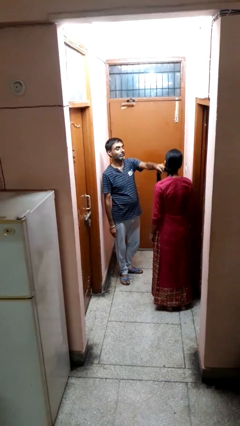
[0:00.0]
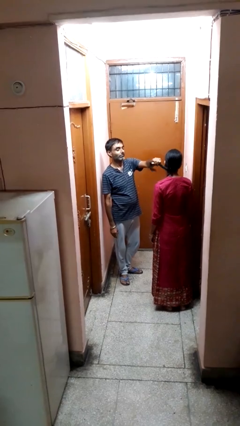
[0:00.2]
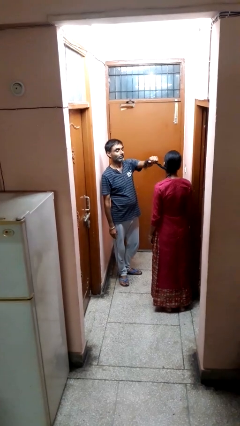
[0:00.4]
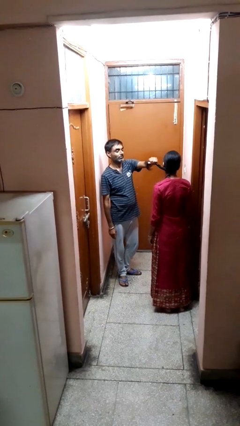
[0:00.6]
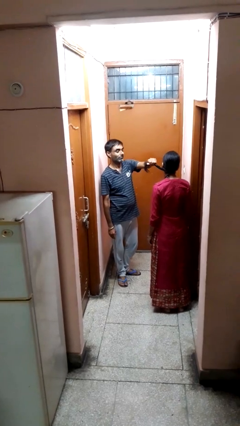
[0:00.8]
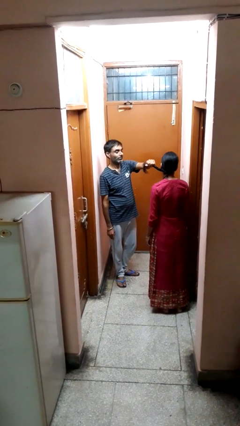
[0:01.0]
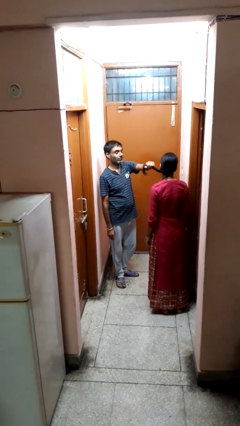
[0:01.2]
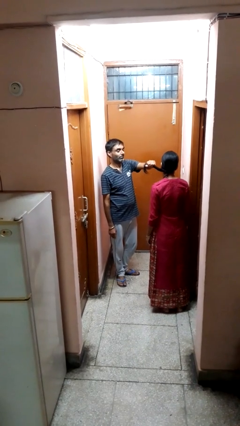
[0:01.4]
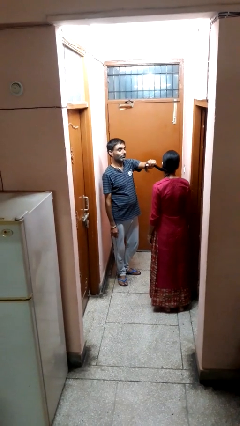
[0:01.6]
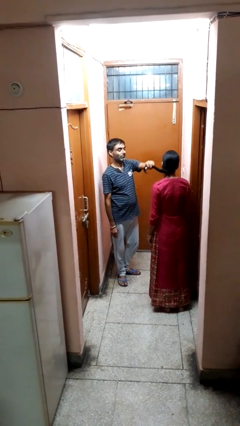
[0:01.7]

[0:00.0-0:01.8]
person grabs person by hair

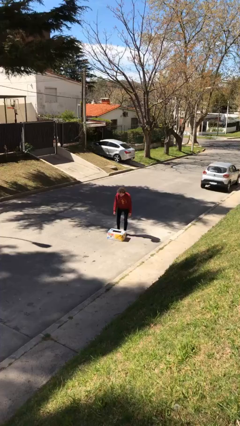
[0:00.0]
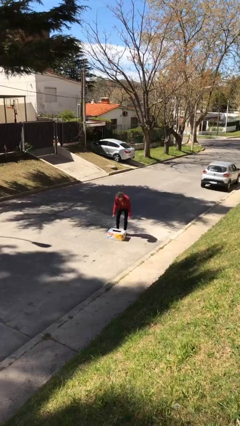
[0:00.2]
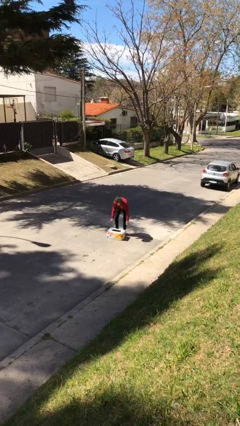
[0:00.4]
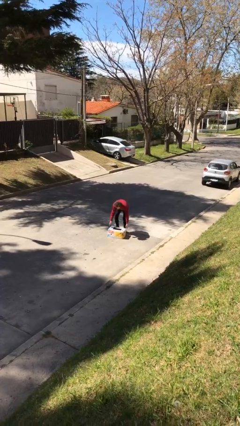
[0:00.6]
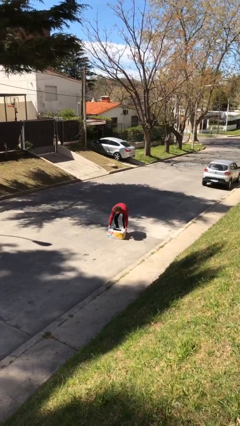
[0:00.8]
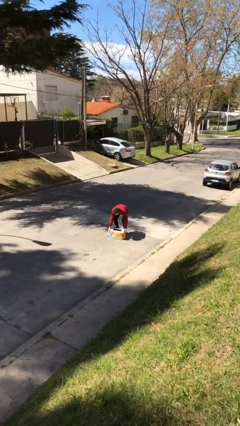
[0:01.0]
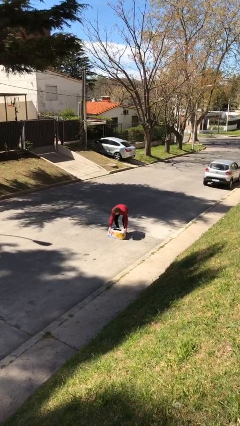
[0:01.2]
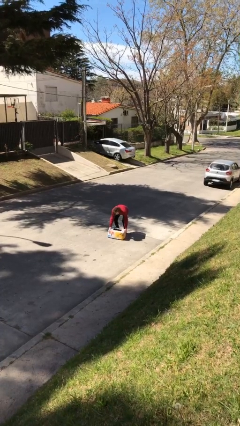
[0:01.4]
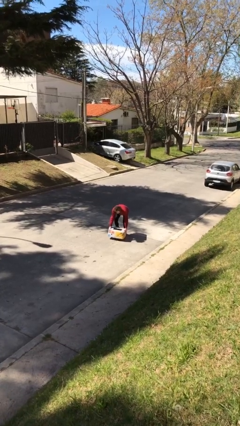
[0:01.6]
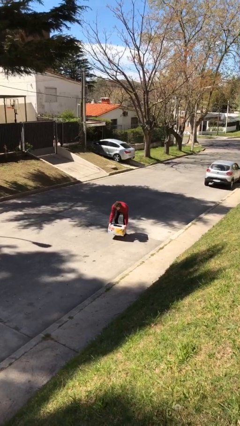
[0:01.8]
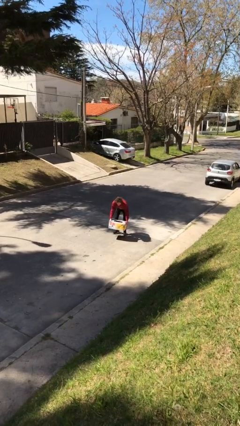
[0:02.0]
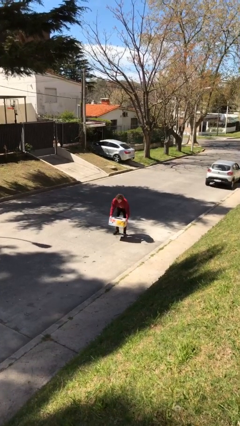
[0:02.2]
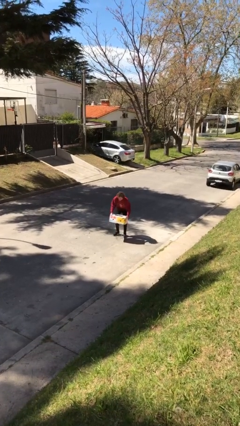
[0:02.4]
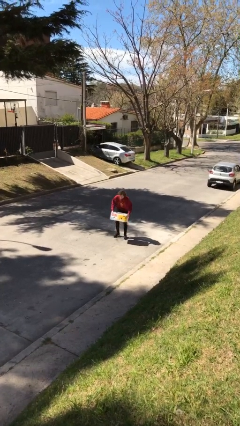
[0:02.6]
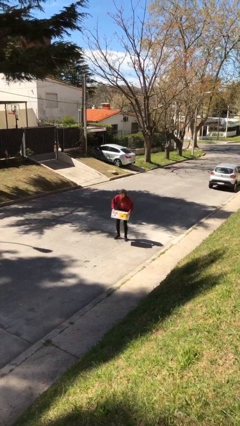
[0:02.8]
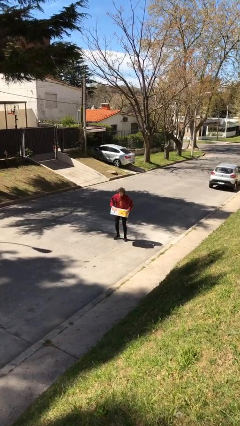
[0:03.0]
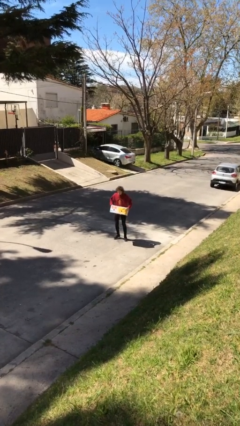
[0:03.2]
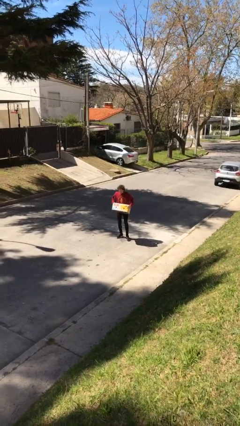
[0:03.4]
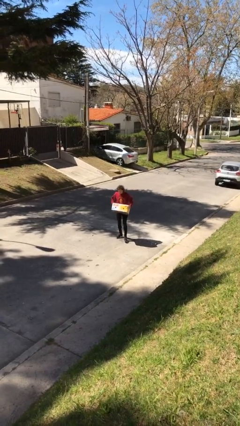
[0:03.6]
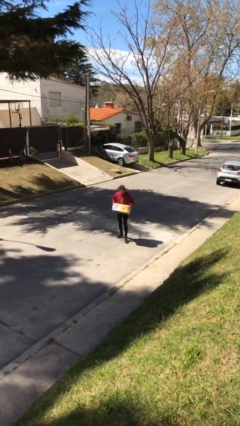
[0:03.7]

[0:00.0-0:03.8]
person picks up object from floor

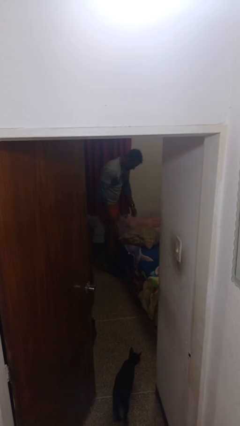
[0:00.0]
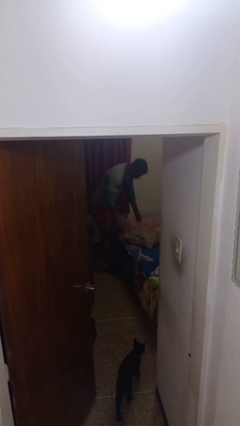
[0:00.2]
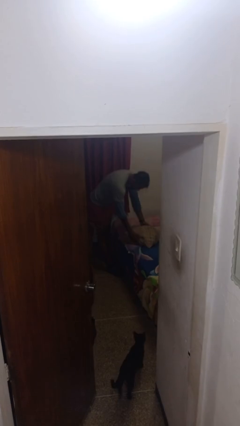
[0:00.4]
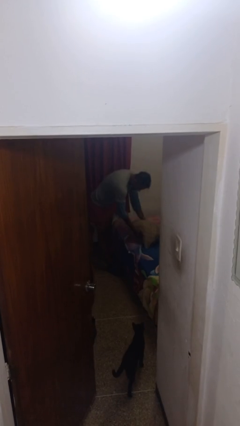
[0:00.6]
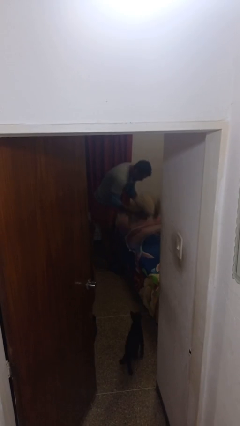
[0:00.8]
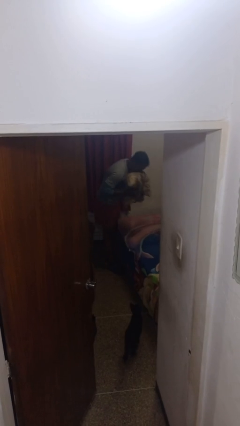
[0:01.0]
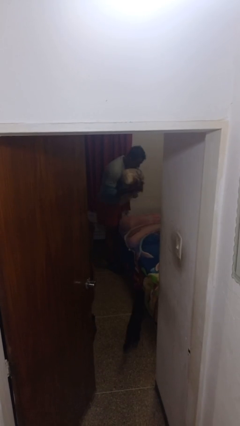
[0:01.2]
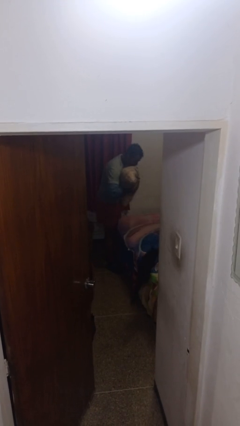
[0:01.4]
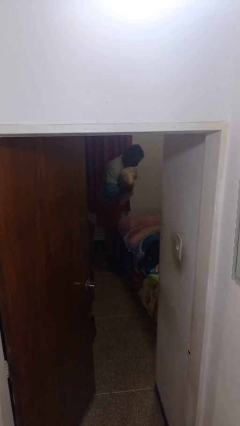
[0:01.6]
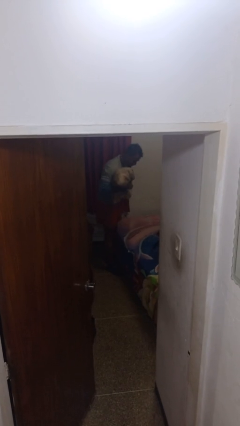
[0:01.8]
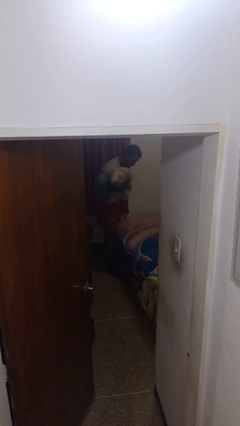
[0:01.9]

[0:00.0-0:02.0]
person picks up object from bed

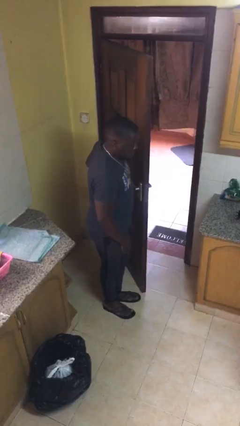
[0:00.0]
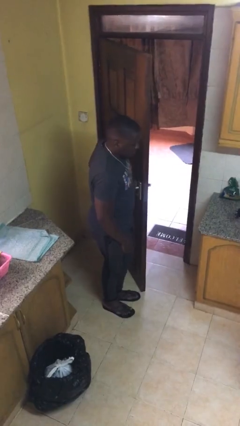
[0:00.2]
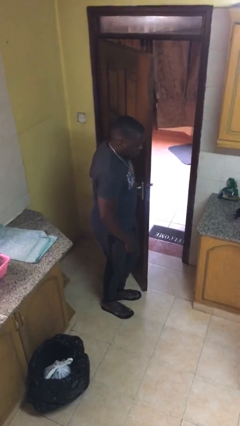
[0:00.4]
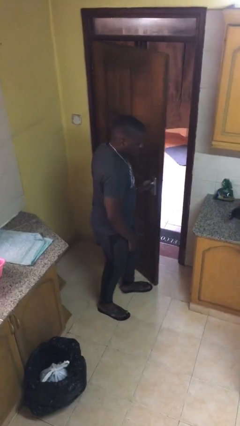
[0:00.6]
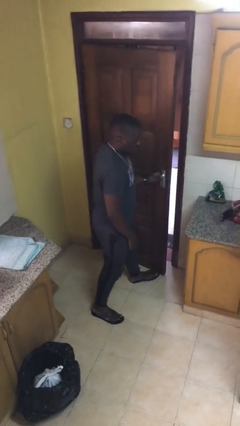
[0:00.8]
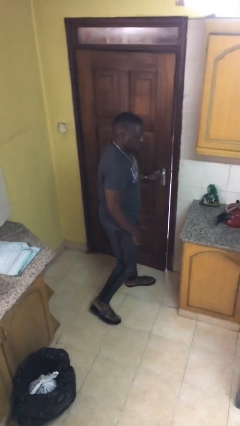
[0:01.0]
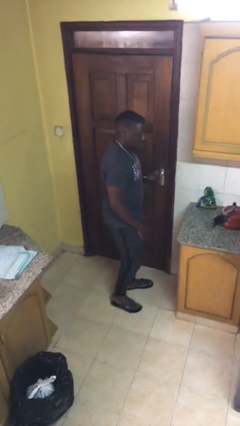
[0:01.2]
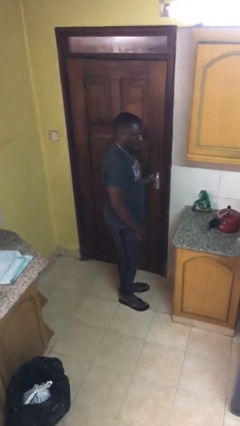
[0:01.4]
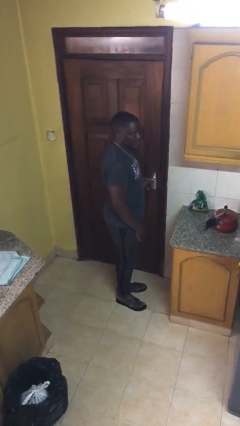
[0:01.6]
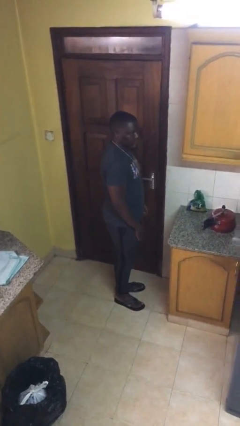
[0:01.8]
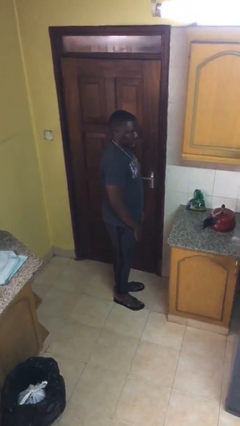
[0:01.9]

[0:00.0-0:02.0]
person closes facility door

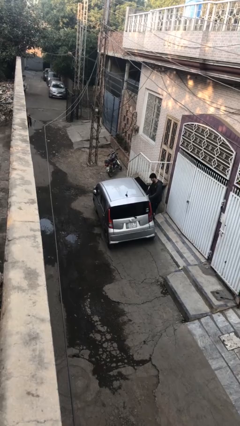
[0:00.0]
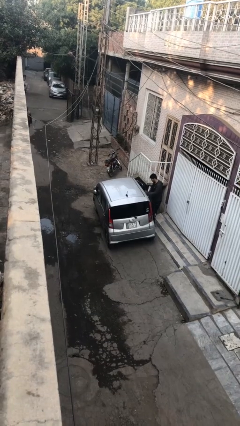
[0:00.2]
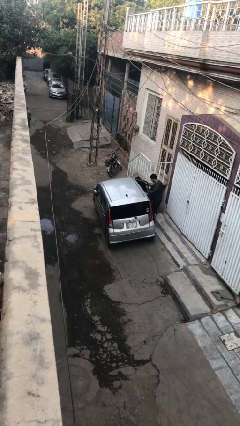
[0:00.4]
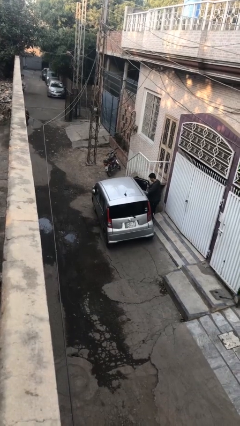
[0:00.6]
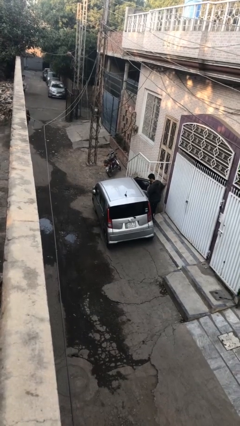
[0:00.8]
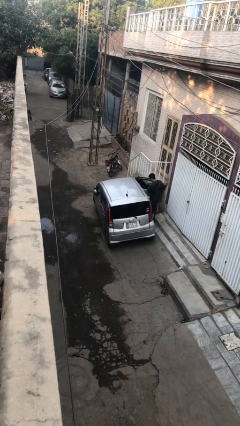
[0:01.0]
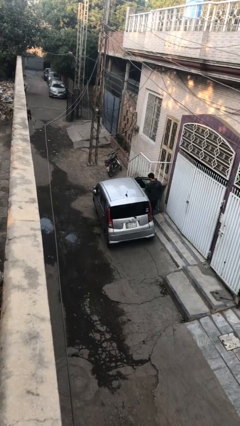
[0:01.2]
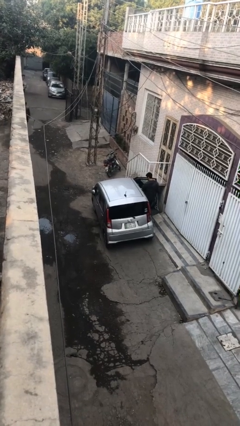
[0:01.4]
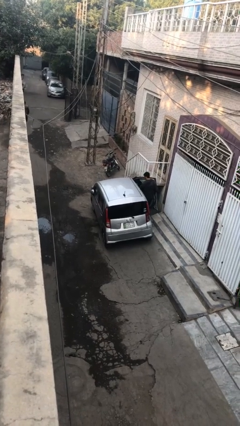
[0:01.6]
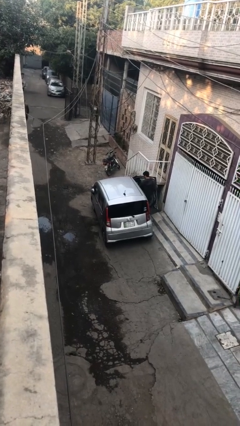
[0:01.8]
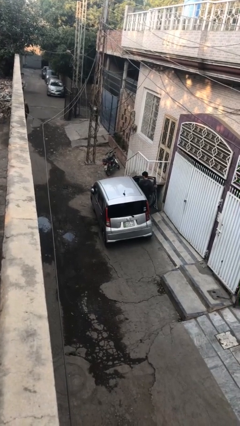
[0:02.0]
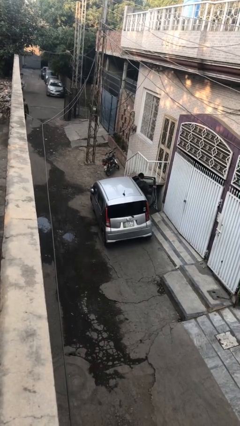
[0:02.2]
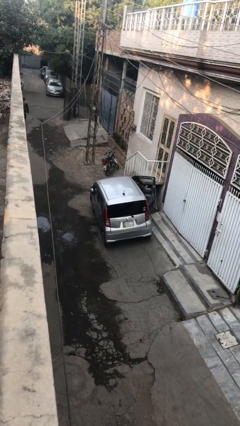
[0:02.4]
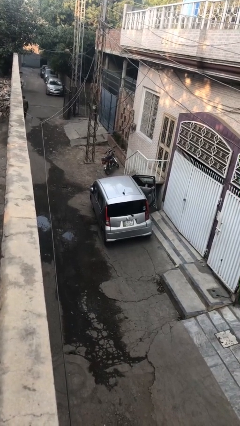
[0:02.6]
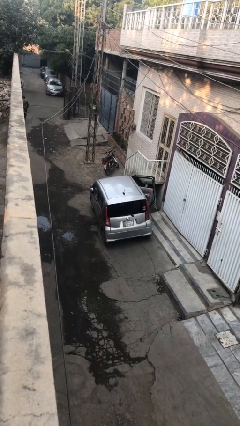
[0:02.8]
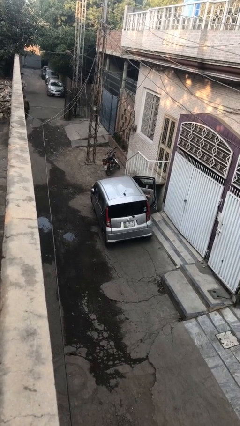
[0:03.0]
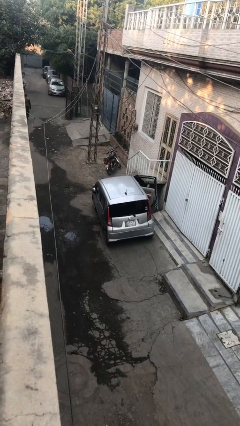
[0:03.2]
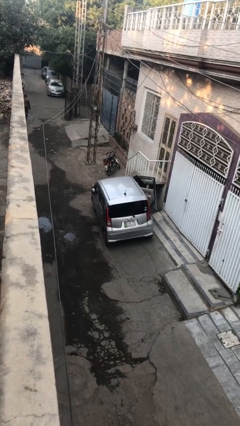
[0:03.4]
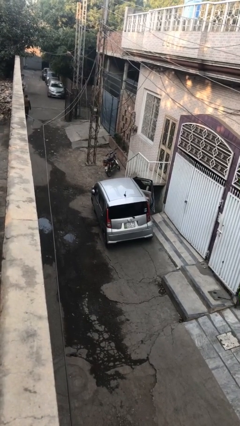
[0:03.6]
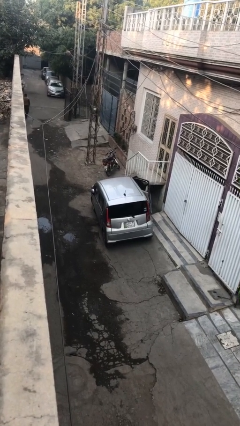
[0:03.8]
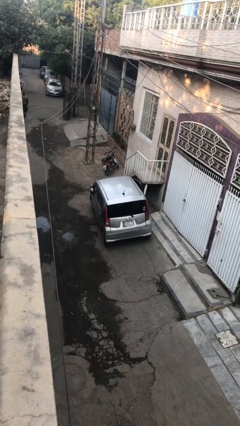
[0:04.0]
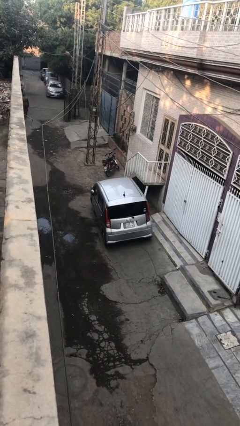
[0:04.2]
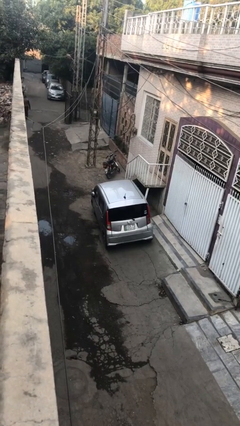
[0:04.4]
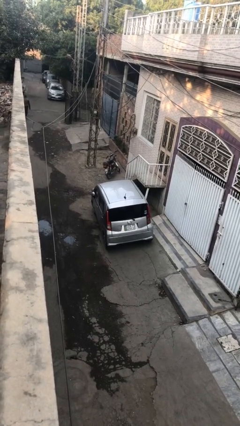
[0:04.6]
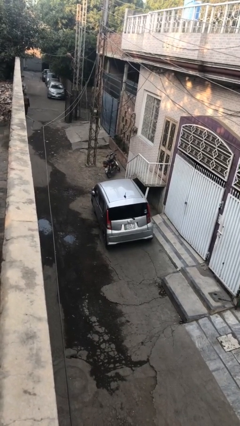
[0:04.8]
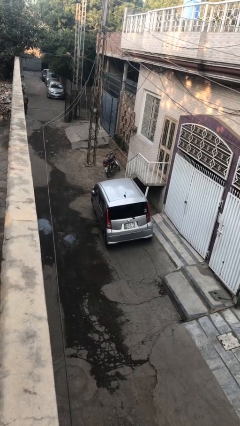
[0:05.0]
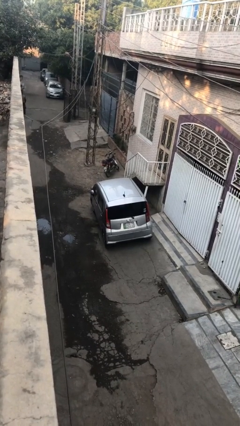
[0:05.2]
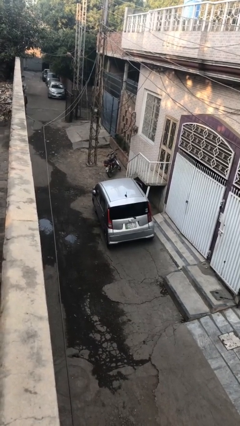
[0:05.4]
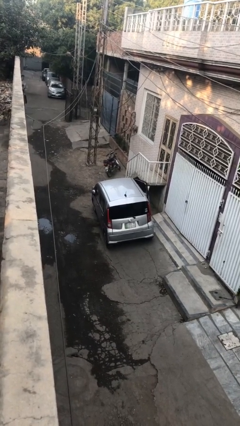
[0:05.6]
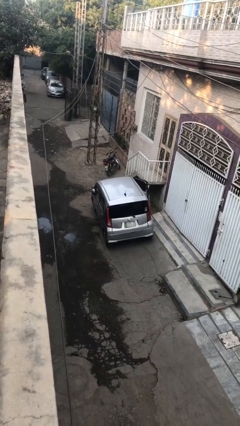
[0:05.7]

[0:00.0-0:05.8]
car picks up person

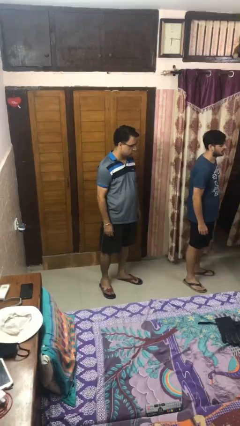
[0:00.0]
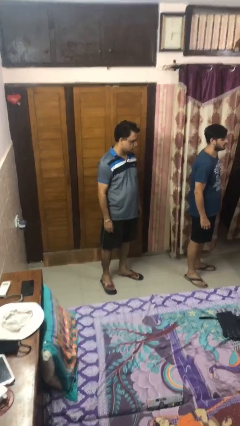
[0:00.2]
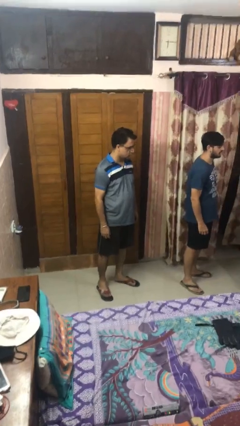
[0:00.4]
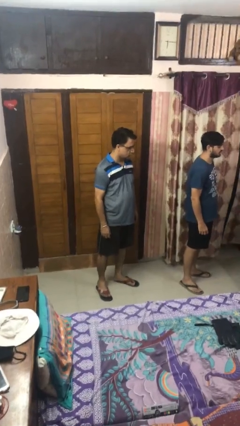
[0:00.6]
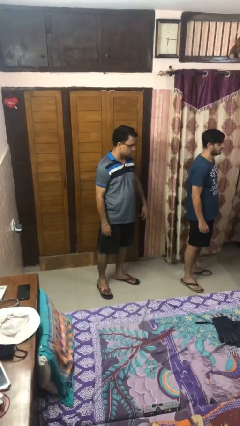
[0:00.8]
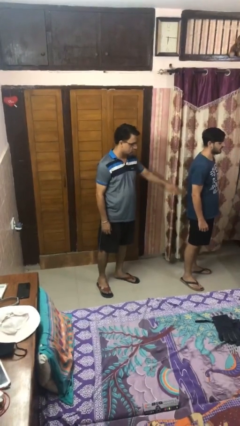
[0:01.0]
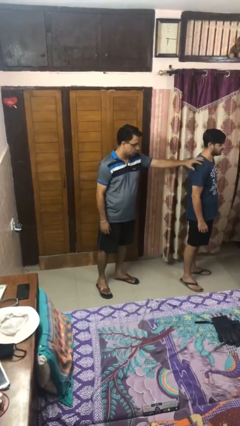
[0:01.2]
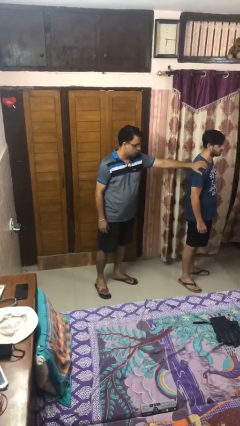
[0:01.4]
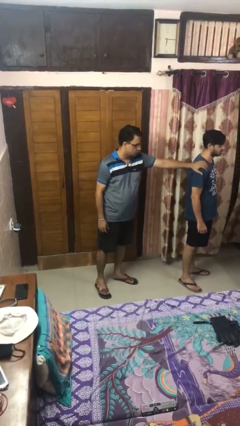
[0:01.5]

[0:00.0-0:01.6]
person grabs person by shoulder

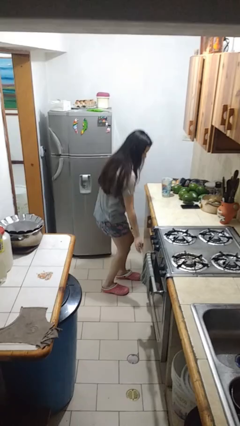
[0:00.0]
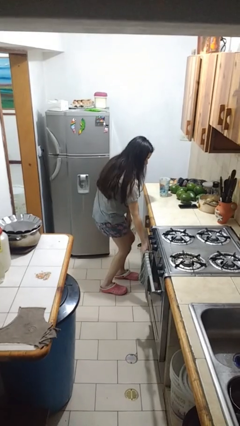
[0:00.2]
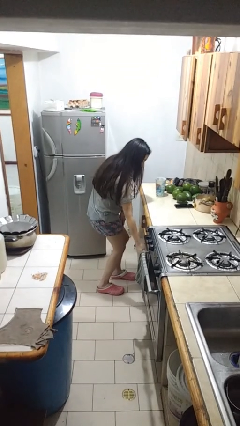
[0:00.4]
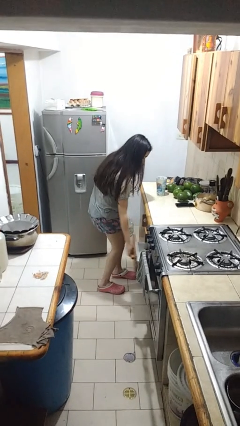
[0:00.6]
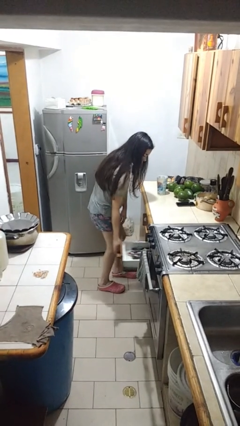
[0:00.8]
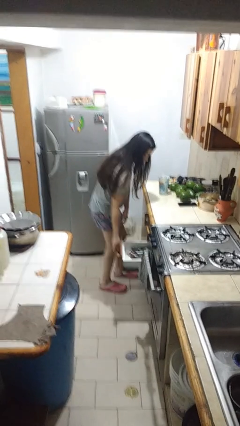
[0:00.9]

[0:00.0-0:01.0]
person opens kitchen drawer
